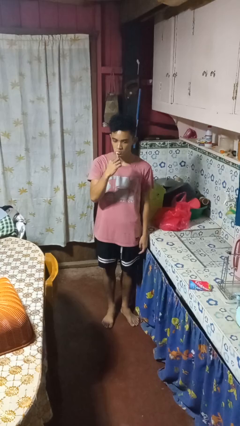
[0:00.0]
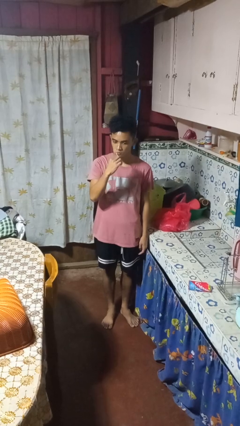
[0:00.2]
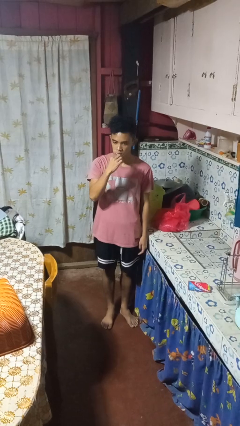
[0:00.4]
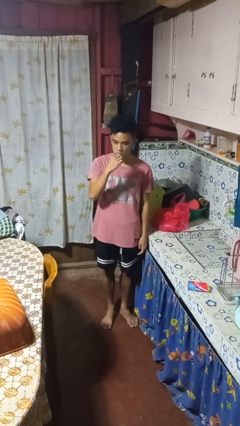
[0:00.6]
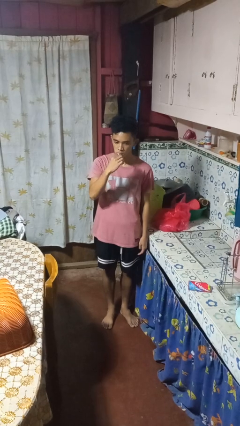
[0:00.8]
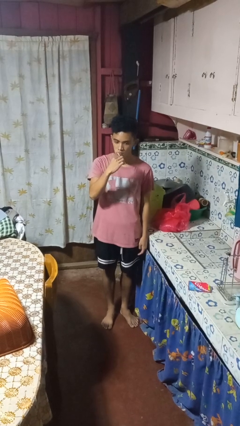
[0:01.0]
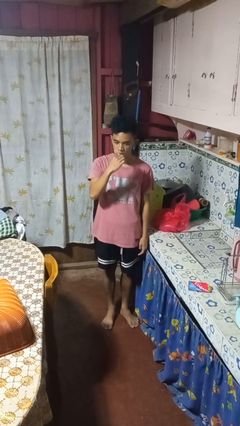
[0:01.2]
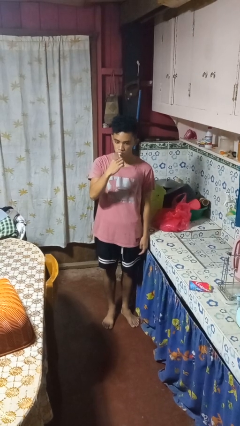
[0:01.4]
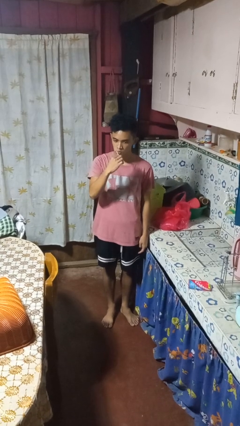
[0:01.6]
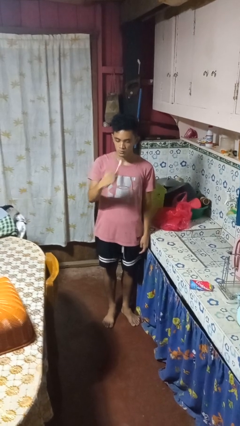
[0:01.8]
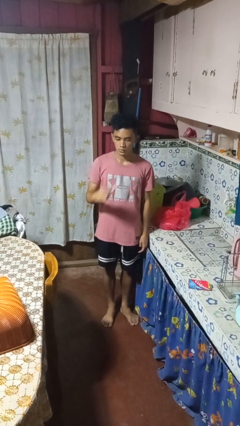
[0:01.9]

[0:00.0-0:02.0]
person brushes teeth

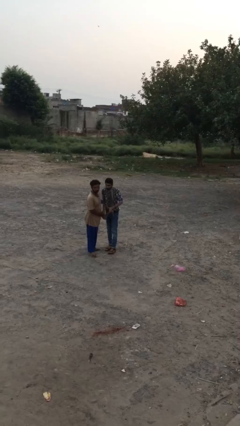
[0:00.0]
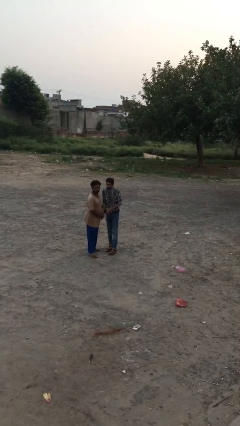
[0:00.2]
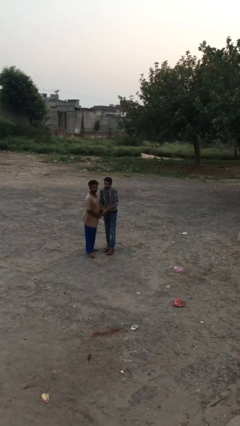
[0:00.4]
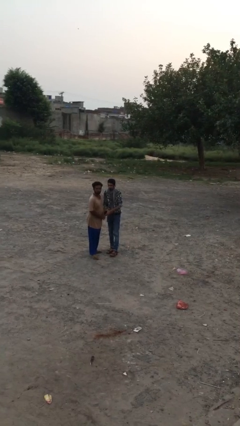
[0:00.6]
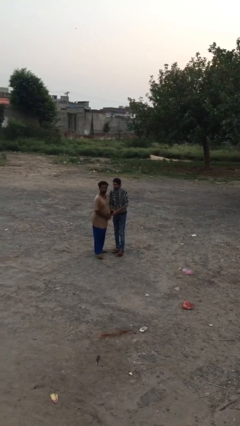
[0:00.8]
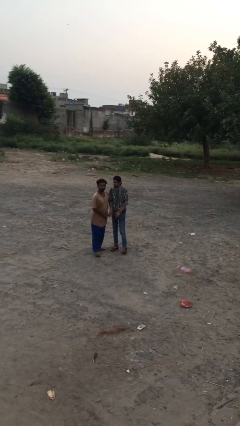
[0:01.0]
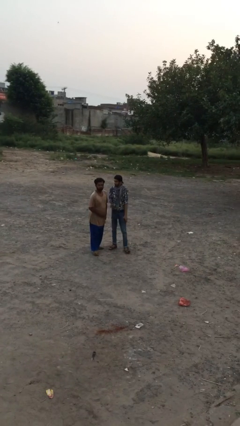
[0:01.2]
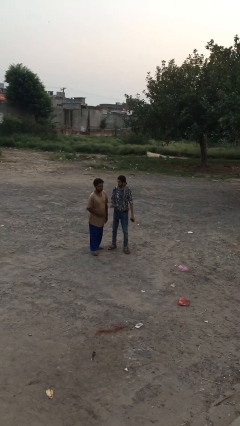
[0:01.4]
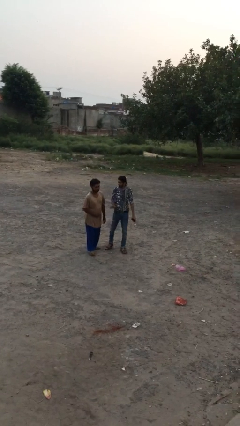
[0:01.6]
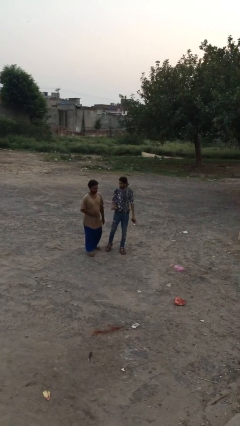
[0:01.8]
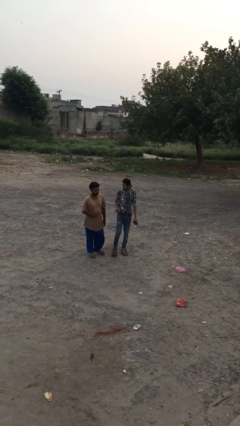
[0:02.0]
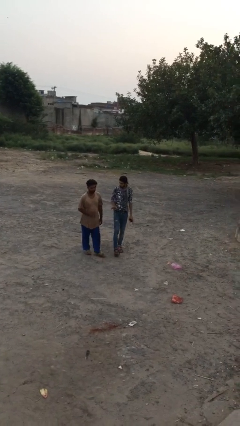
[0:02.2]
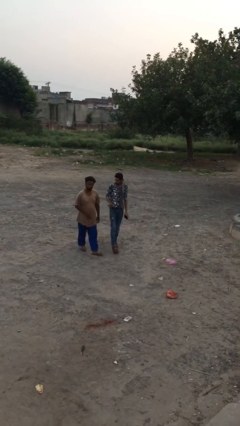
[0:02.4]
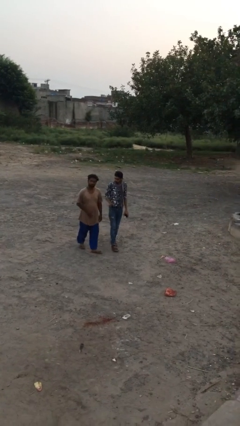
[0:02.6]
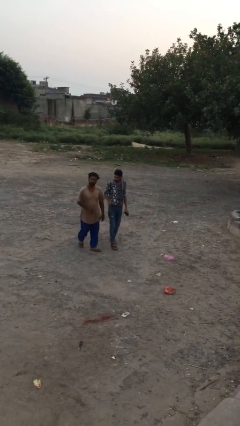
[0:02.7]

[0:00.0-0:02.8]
person talks to person

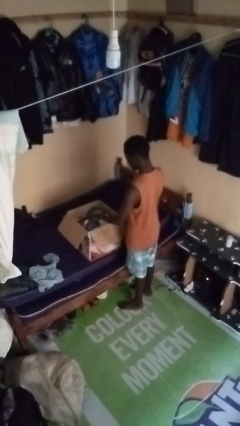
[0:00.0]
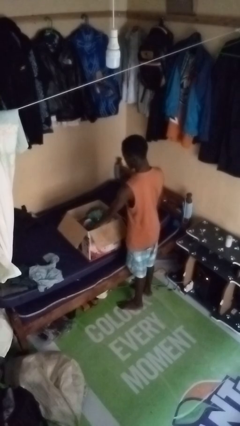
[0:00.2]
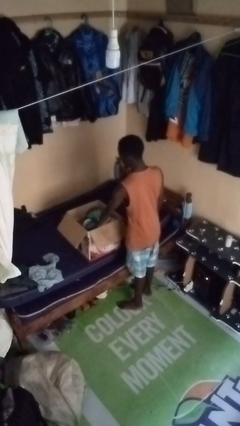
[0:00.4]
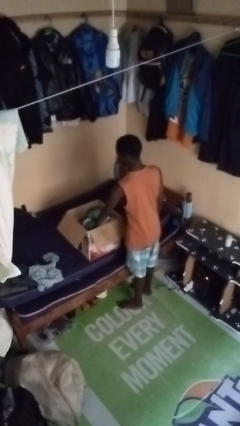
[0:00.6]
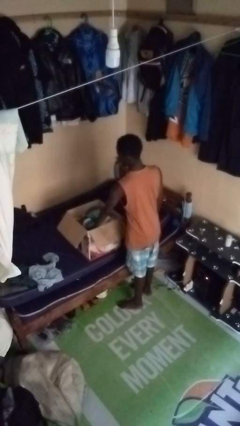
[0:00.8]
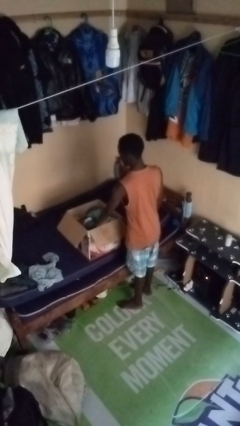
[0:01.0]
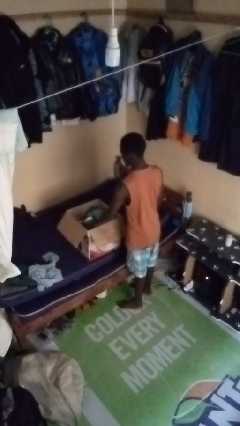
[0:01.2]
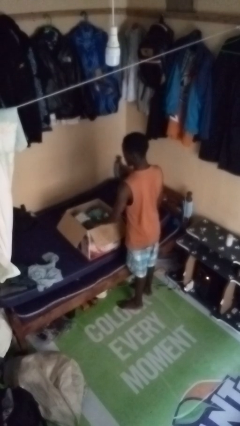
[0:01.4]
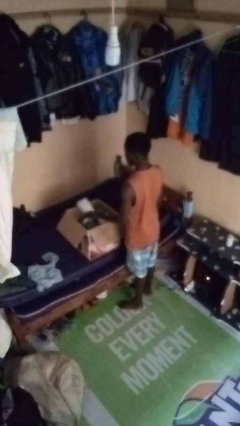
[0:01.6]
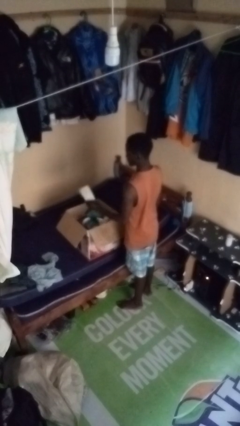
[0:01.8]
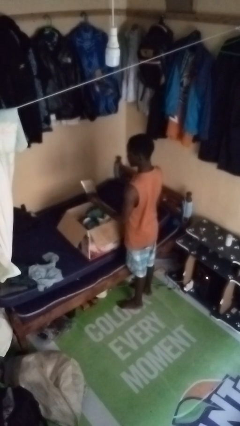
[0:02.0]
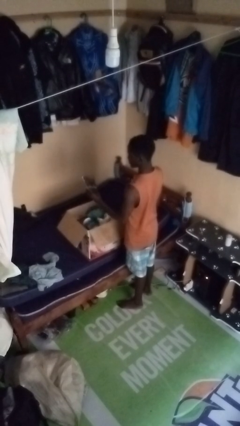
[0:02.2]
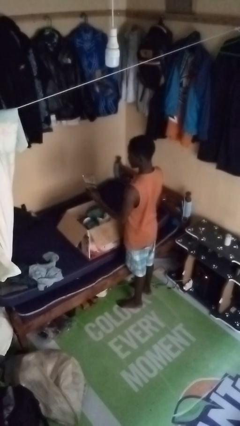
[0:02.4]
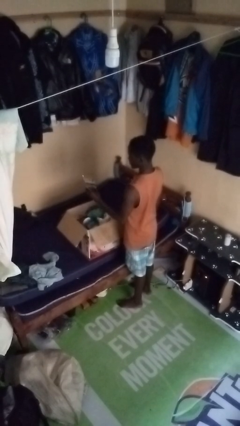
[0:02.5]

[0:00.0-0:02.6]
person takes object from box

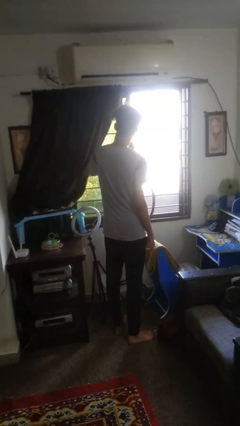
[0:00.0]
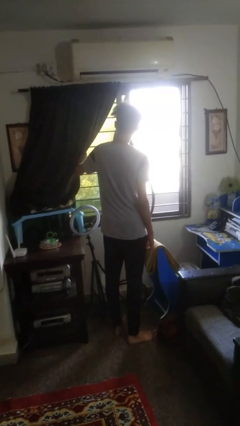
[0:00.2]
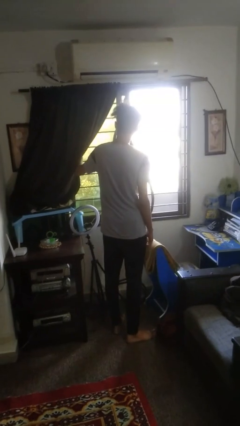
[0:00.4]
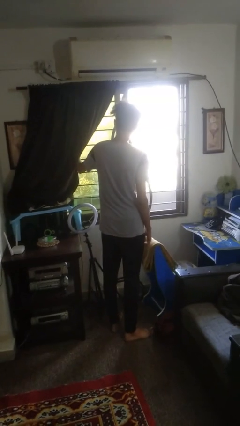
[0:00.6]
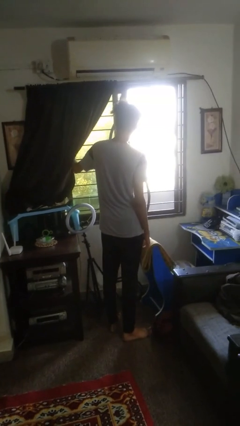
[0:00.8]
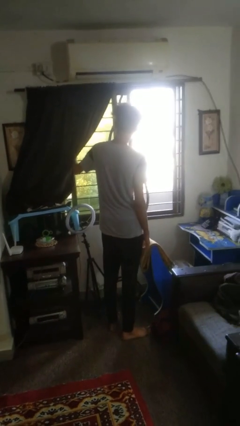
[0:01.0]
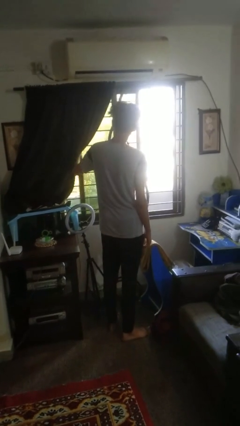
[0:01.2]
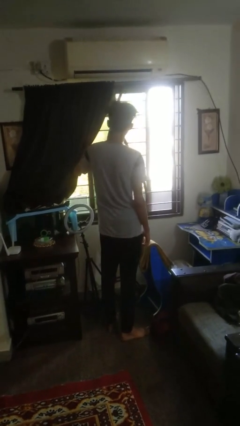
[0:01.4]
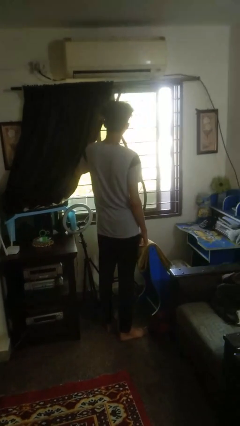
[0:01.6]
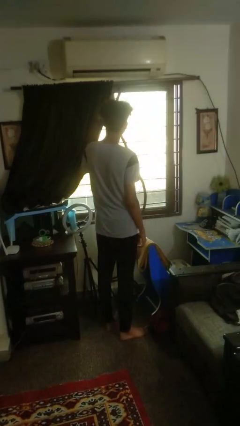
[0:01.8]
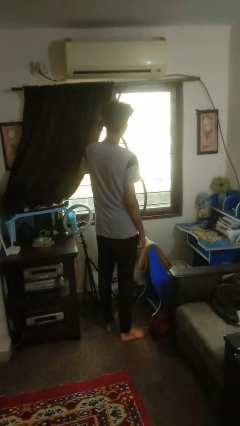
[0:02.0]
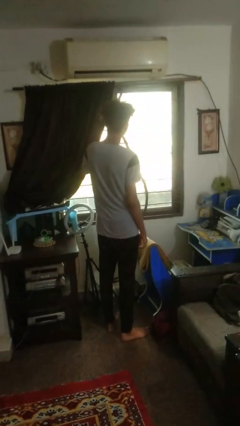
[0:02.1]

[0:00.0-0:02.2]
person closes home window

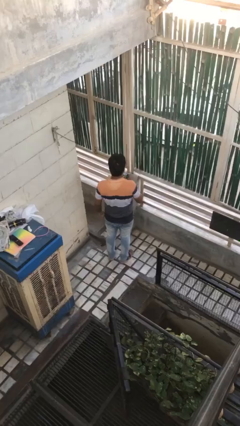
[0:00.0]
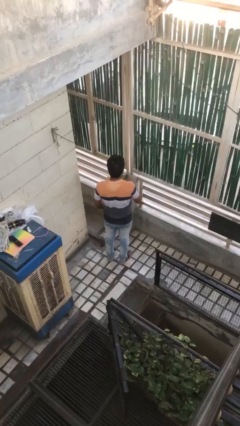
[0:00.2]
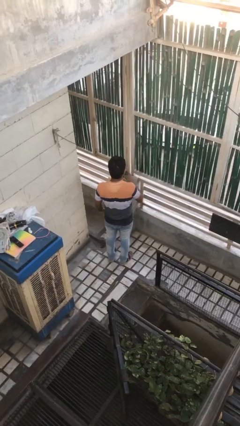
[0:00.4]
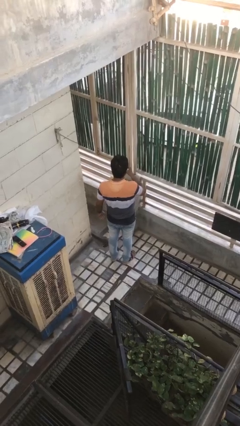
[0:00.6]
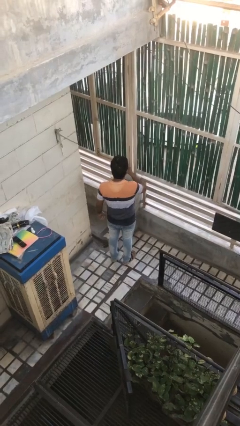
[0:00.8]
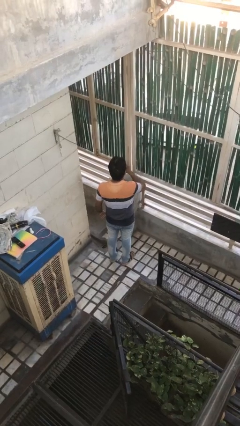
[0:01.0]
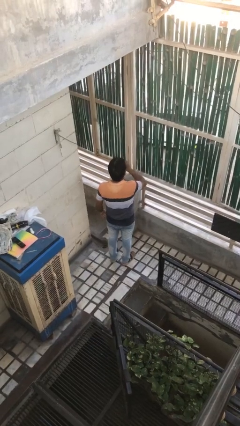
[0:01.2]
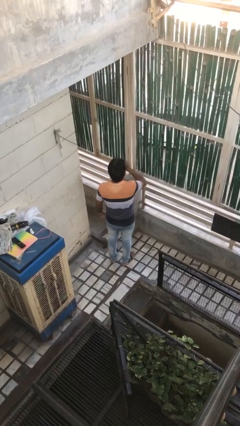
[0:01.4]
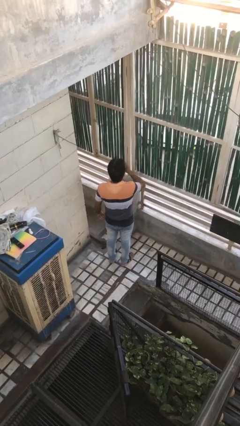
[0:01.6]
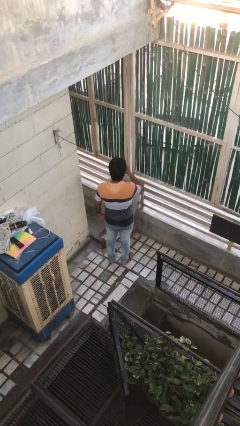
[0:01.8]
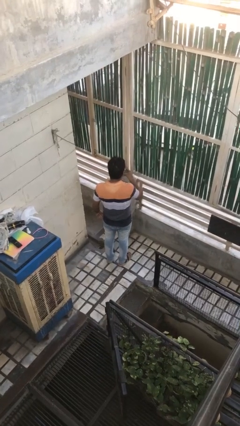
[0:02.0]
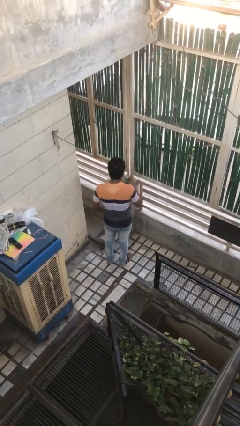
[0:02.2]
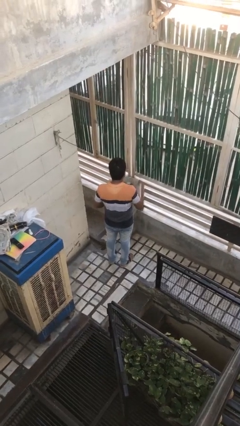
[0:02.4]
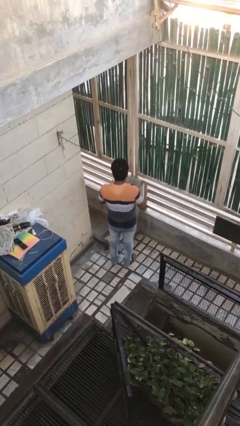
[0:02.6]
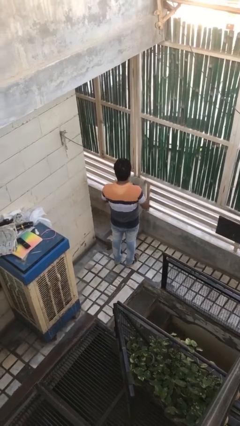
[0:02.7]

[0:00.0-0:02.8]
person drinks from beverage can

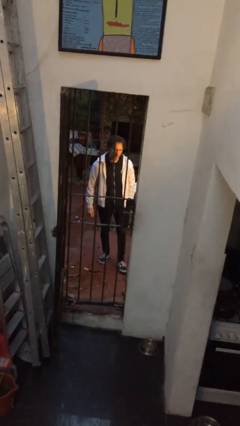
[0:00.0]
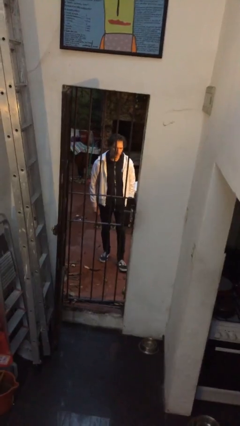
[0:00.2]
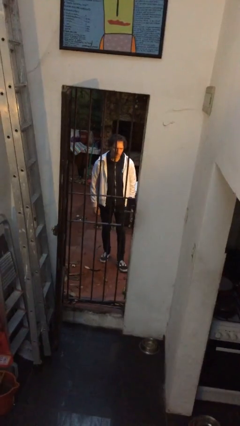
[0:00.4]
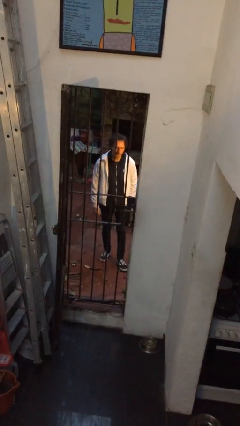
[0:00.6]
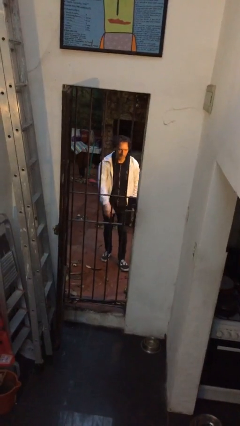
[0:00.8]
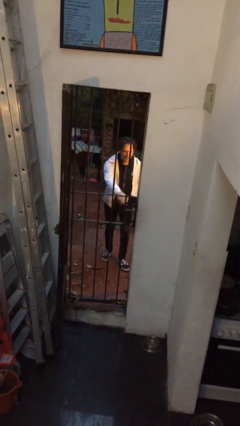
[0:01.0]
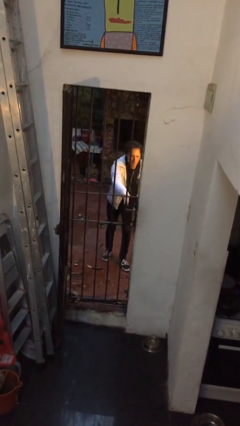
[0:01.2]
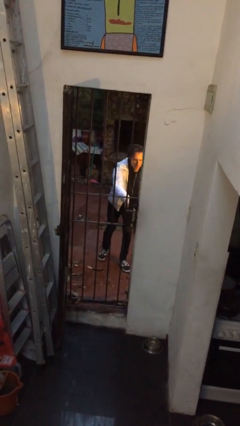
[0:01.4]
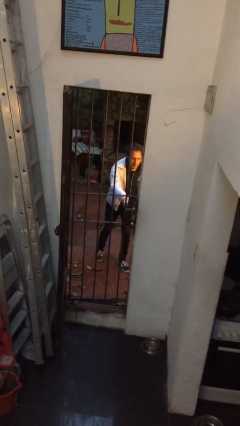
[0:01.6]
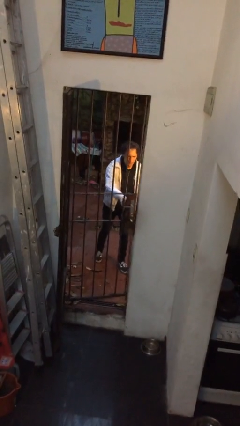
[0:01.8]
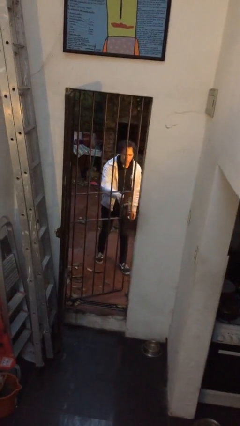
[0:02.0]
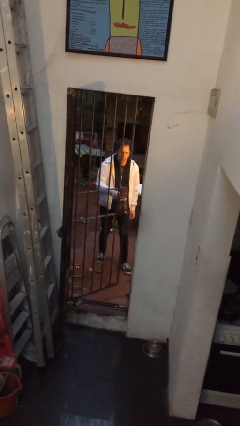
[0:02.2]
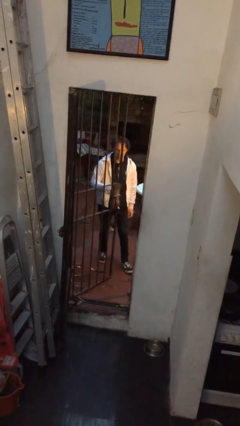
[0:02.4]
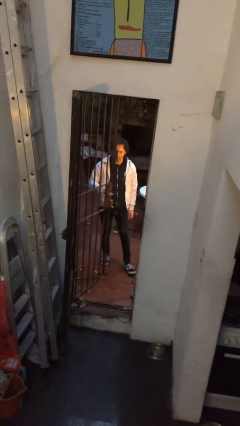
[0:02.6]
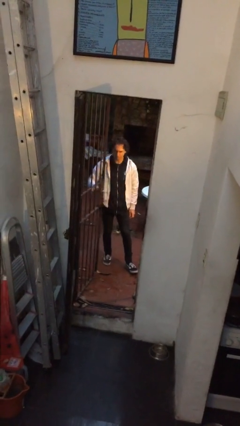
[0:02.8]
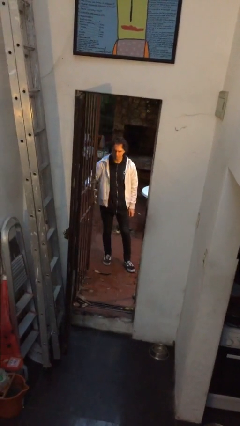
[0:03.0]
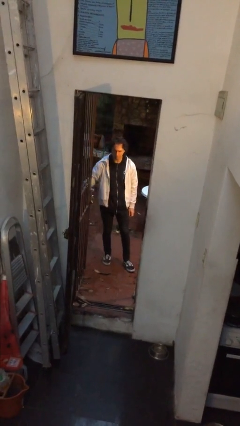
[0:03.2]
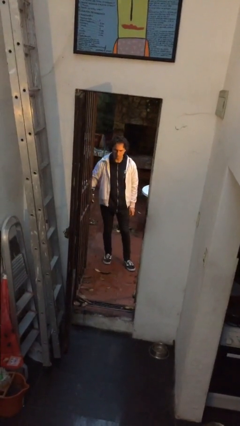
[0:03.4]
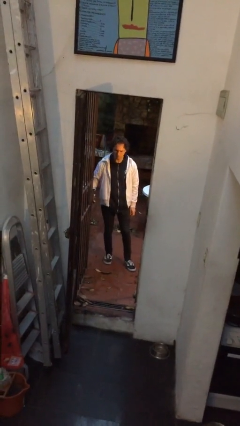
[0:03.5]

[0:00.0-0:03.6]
person opens gate

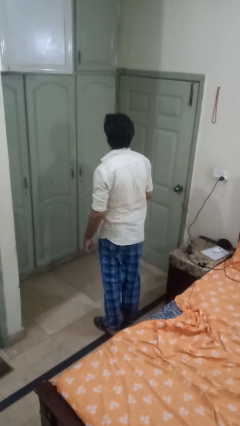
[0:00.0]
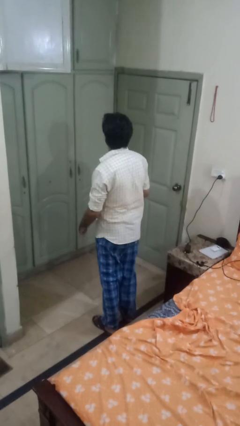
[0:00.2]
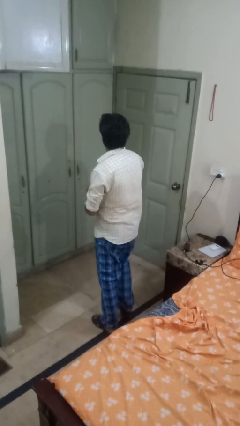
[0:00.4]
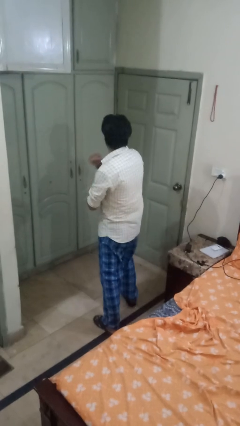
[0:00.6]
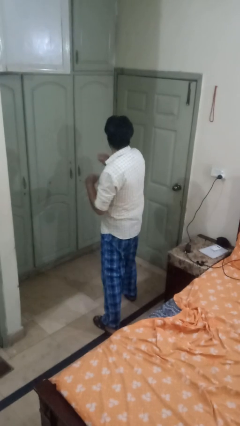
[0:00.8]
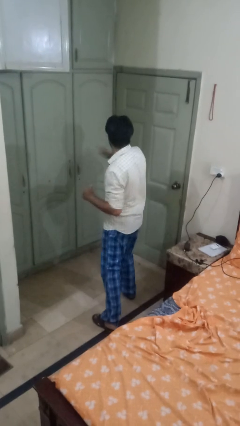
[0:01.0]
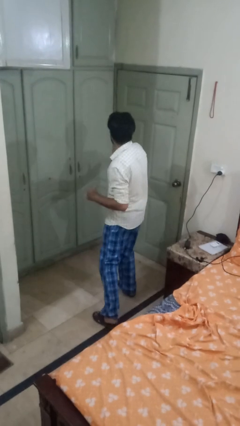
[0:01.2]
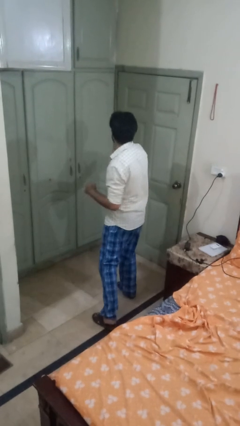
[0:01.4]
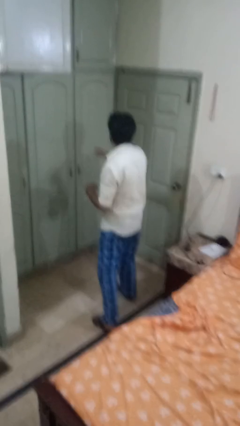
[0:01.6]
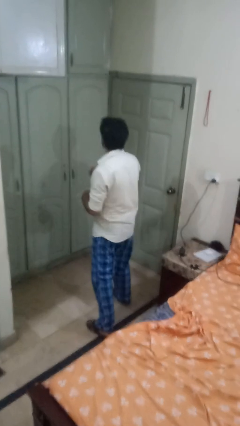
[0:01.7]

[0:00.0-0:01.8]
person karate chop
